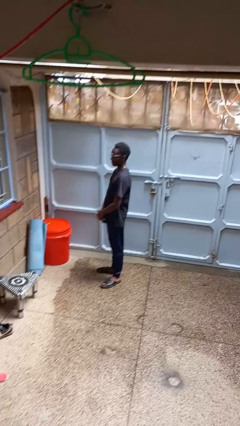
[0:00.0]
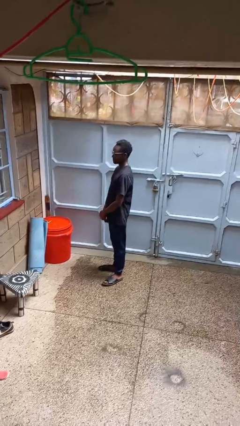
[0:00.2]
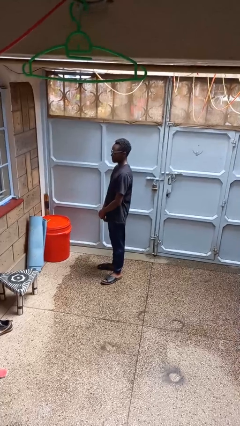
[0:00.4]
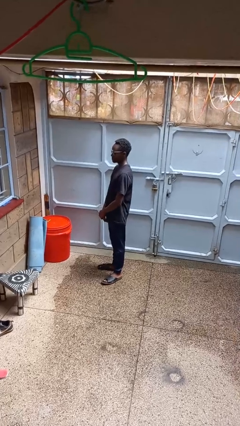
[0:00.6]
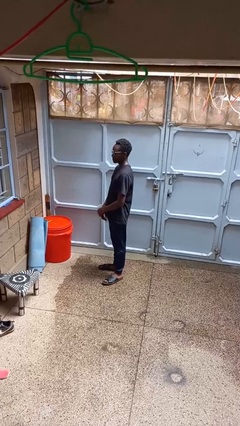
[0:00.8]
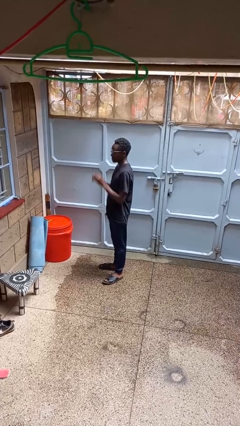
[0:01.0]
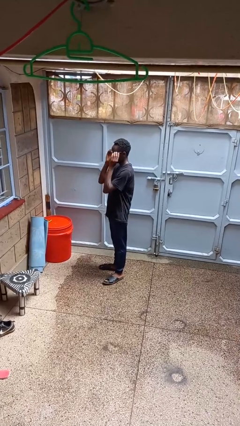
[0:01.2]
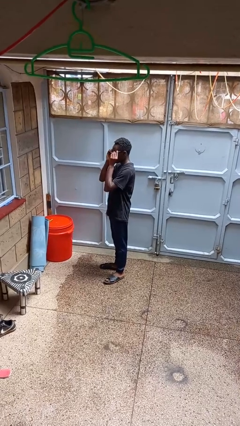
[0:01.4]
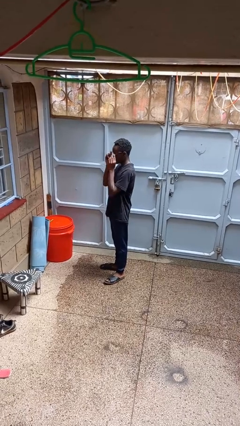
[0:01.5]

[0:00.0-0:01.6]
person takes off glasses

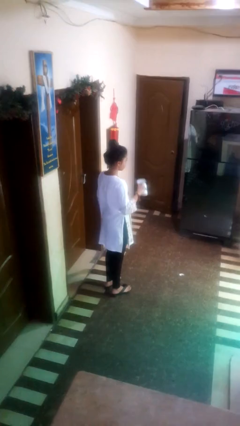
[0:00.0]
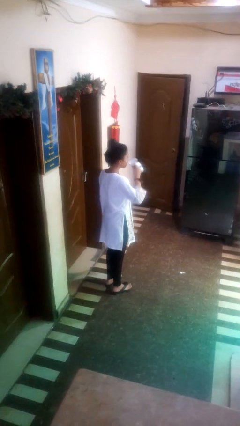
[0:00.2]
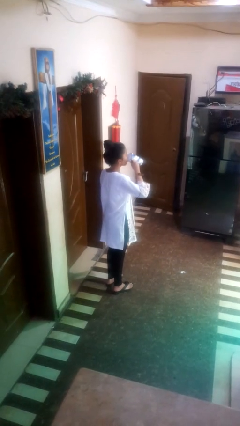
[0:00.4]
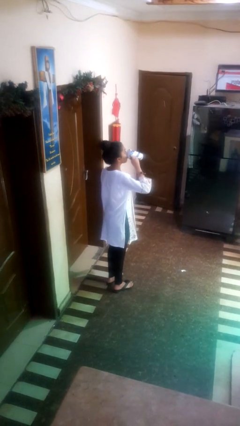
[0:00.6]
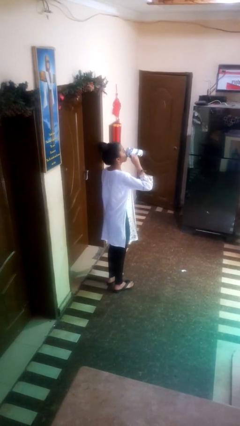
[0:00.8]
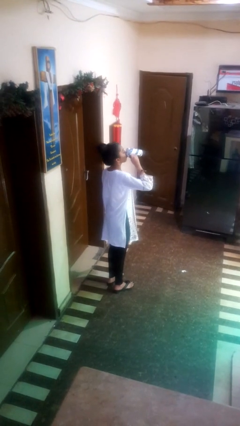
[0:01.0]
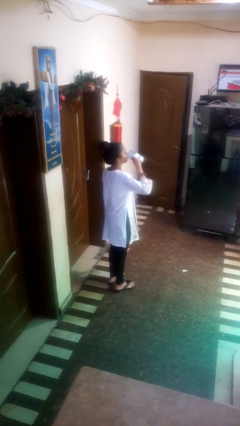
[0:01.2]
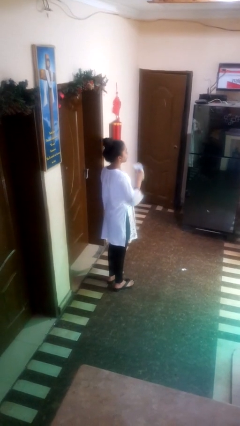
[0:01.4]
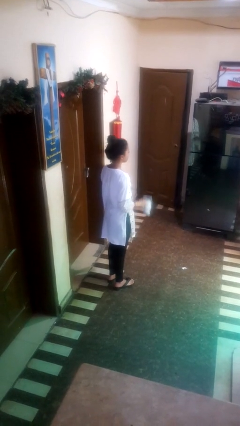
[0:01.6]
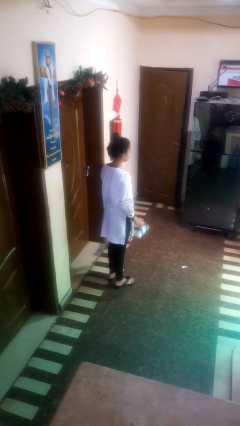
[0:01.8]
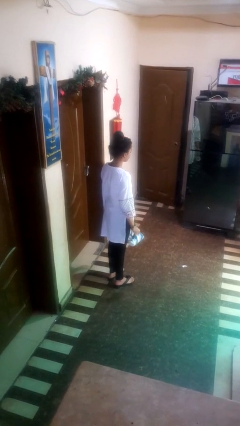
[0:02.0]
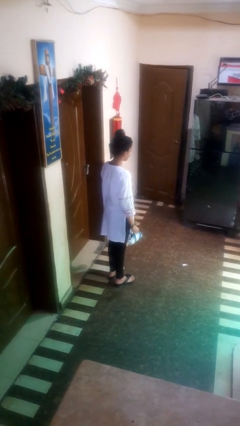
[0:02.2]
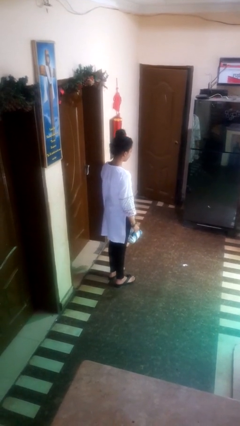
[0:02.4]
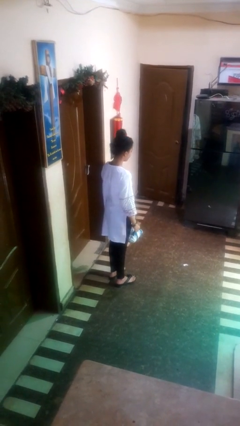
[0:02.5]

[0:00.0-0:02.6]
person drinks from mug

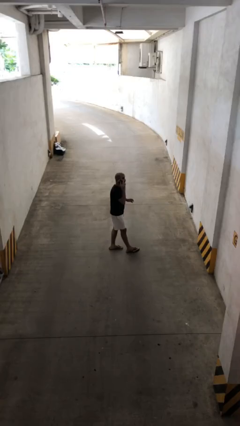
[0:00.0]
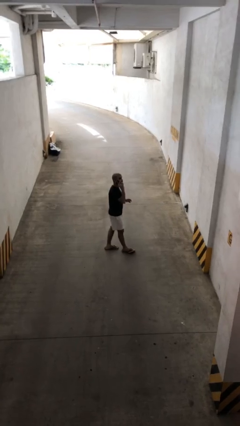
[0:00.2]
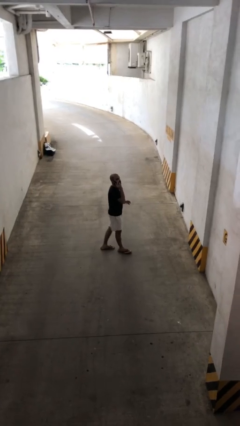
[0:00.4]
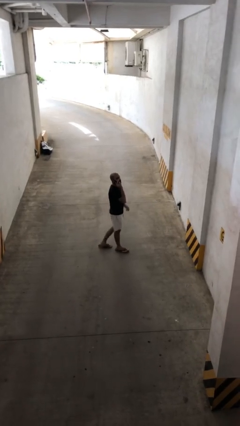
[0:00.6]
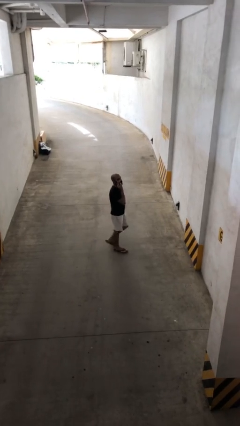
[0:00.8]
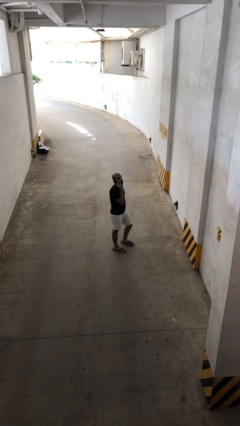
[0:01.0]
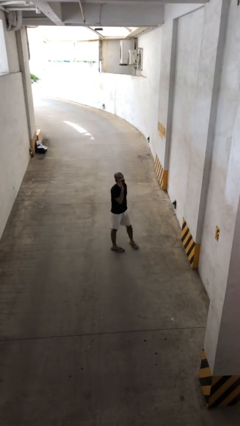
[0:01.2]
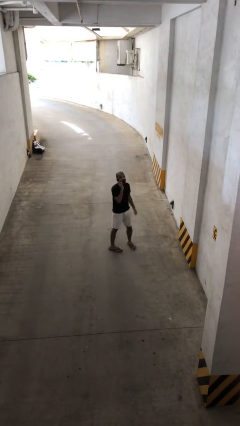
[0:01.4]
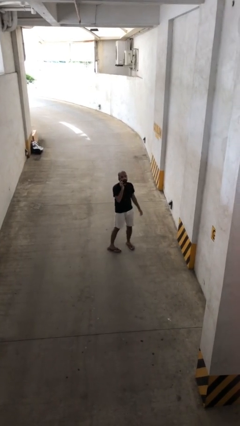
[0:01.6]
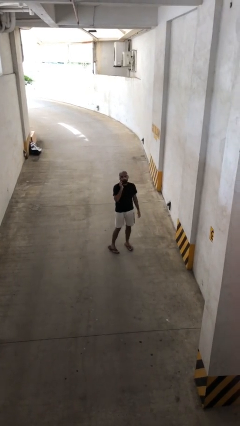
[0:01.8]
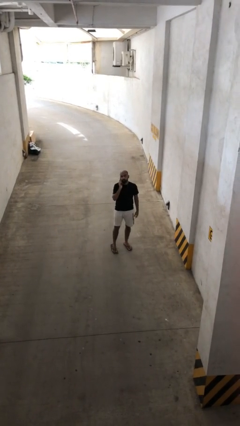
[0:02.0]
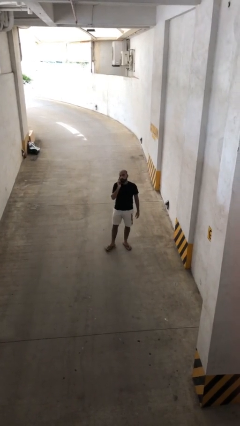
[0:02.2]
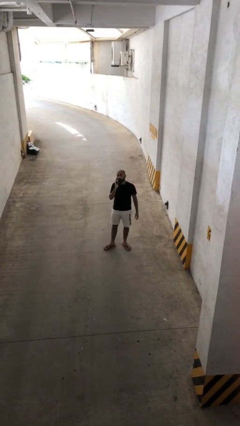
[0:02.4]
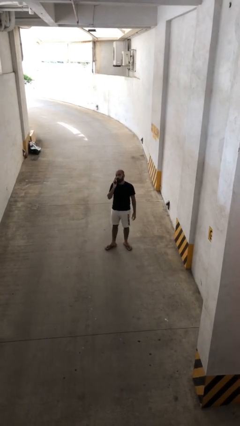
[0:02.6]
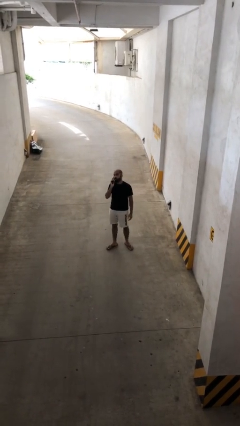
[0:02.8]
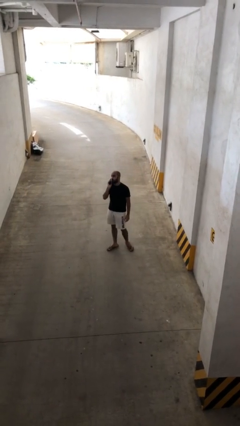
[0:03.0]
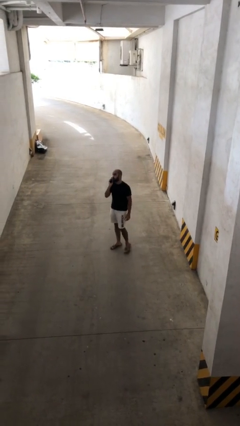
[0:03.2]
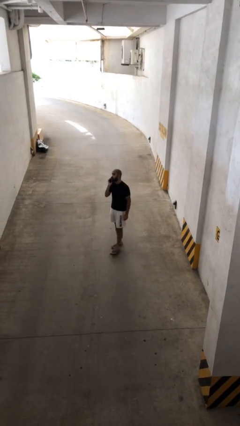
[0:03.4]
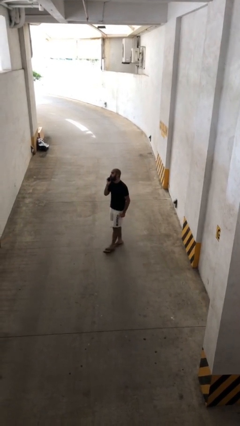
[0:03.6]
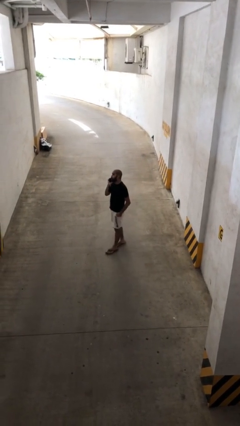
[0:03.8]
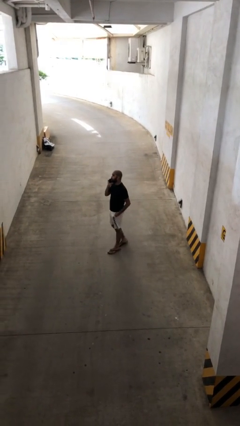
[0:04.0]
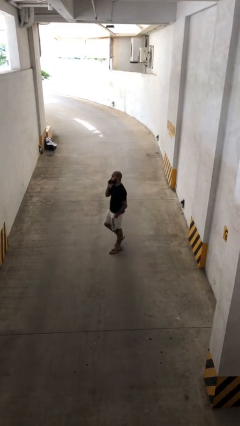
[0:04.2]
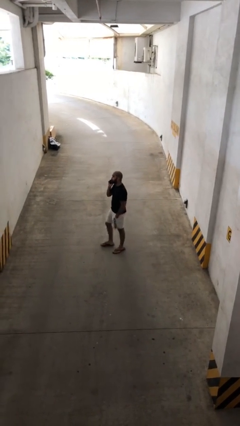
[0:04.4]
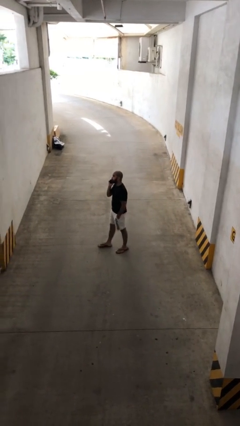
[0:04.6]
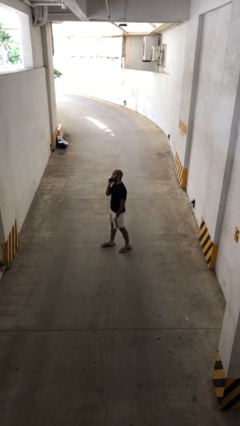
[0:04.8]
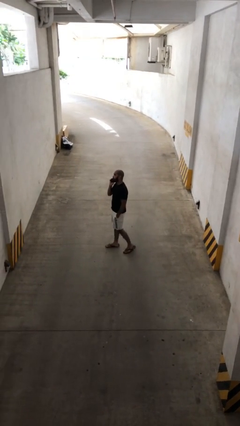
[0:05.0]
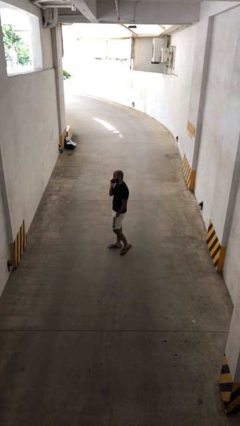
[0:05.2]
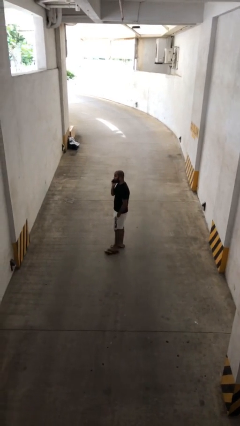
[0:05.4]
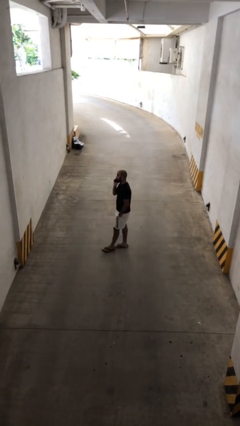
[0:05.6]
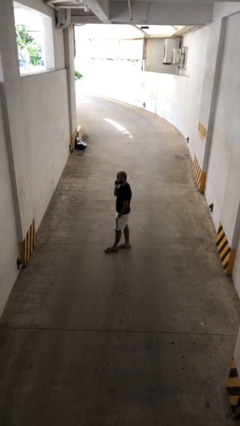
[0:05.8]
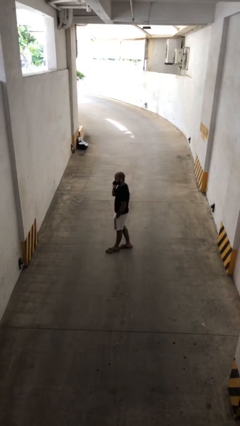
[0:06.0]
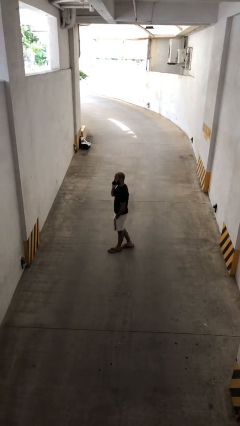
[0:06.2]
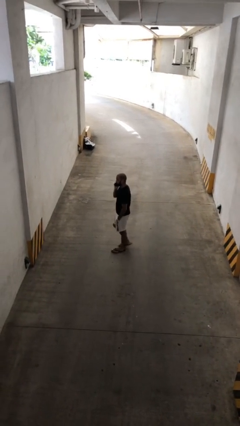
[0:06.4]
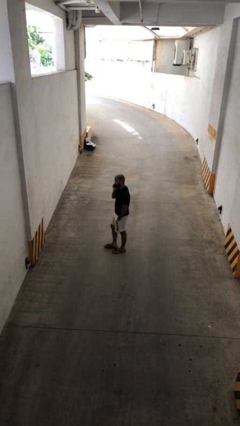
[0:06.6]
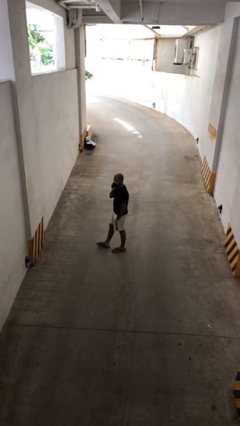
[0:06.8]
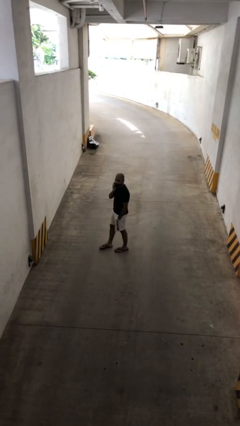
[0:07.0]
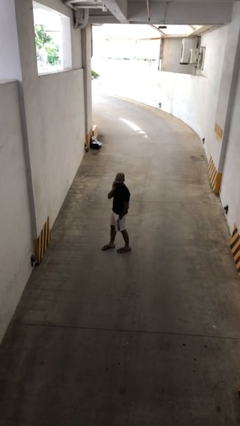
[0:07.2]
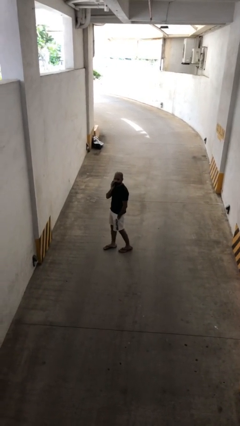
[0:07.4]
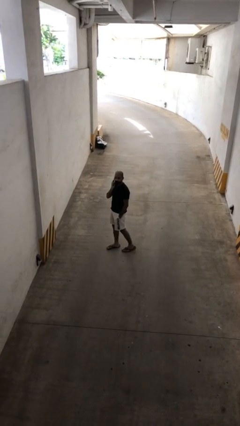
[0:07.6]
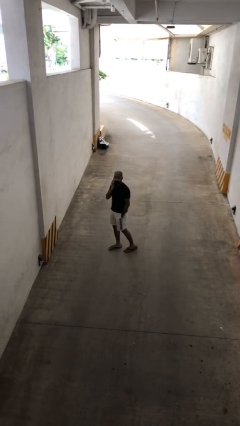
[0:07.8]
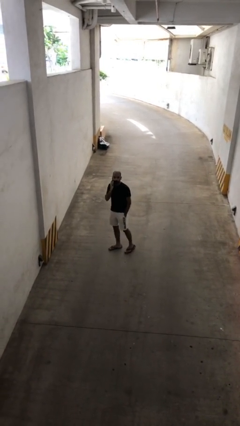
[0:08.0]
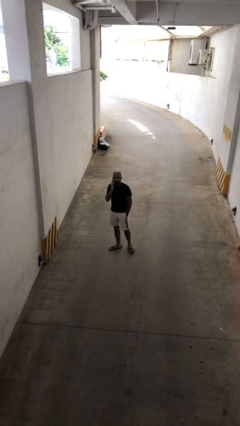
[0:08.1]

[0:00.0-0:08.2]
person talks on phone

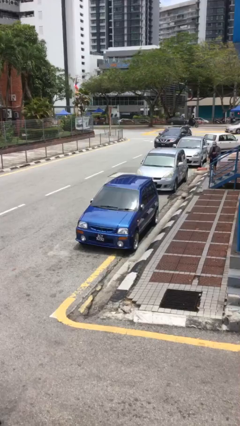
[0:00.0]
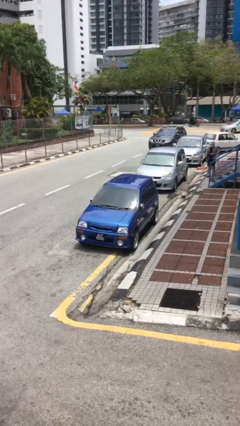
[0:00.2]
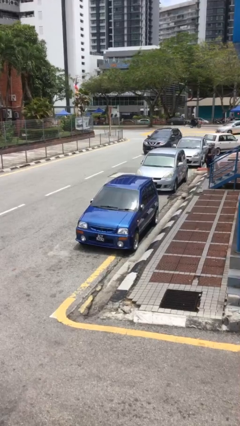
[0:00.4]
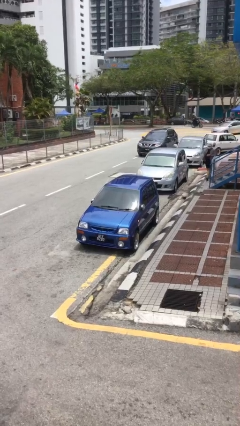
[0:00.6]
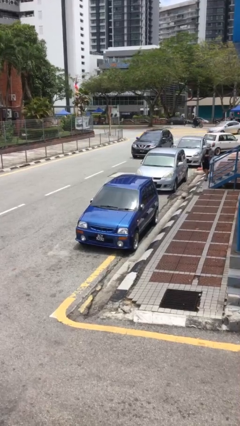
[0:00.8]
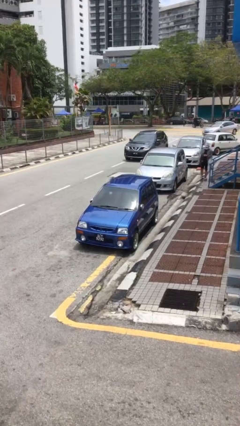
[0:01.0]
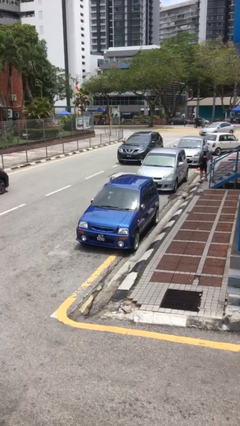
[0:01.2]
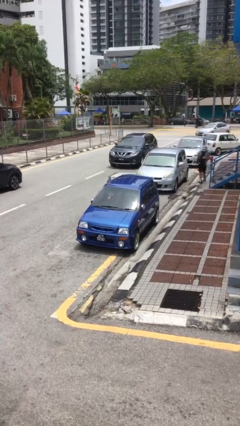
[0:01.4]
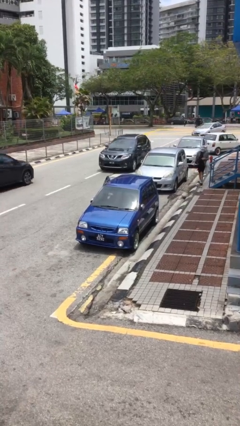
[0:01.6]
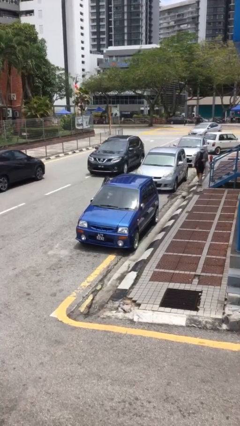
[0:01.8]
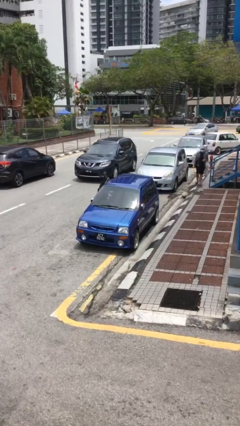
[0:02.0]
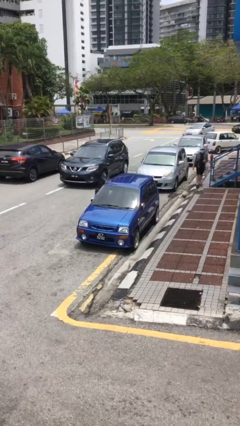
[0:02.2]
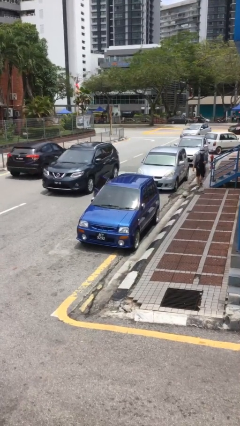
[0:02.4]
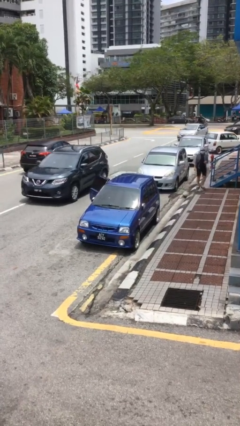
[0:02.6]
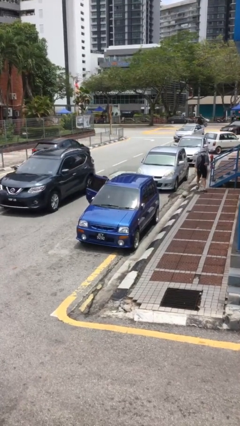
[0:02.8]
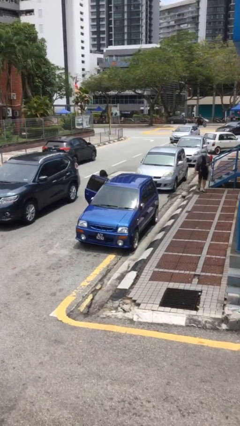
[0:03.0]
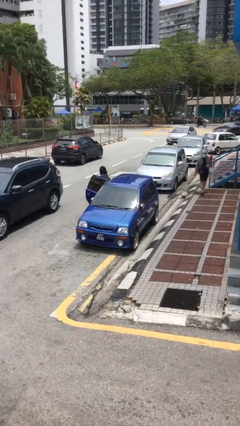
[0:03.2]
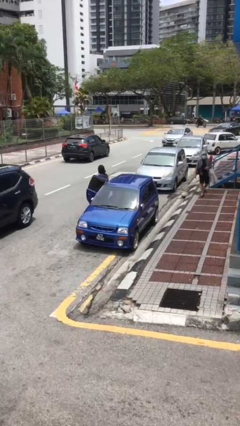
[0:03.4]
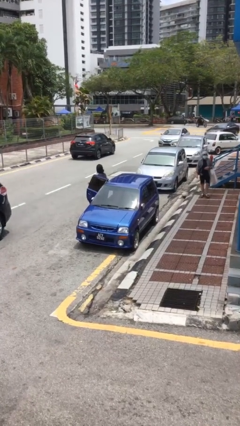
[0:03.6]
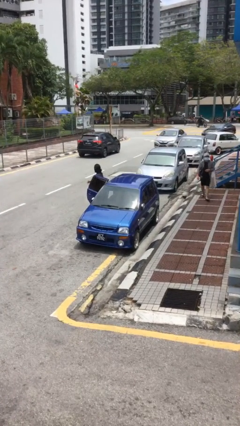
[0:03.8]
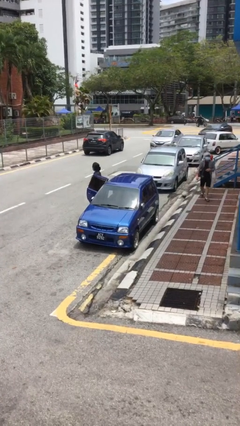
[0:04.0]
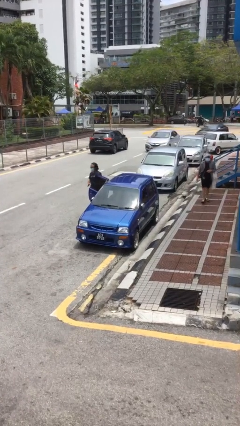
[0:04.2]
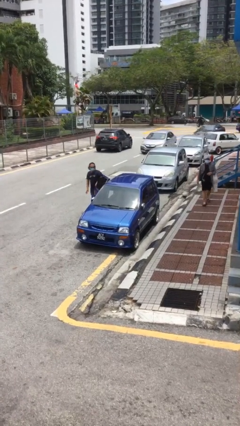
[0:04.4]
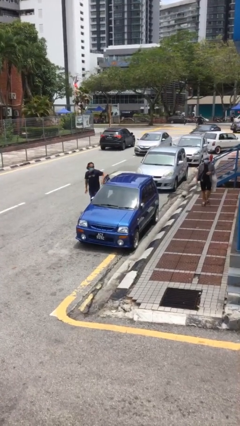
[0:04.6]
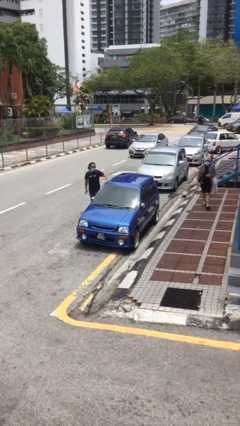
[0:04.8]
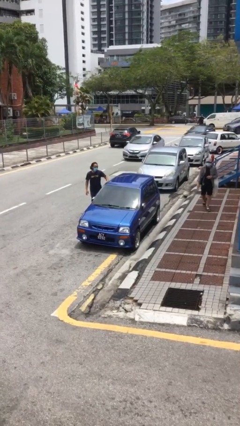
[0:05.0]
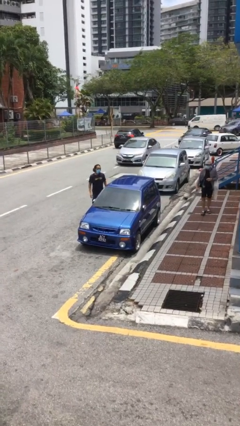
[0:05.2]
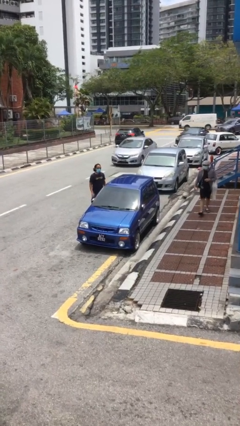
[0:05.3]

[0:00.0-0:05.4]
car drops off person
